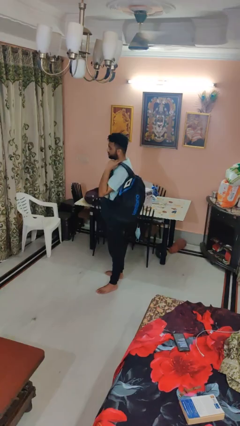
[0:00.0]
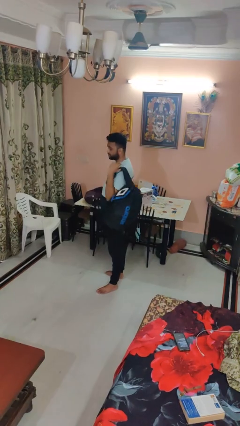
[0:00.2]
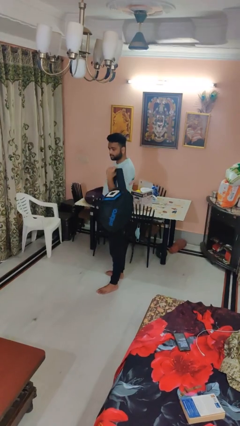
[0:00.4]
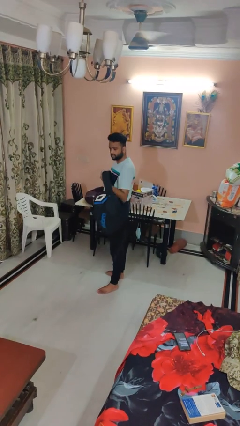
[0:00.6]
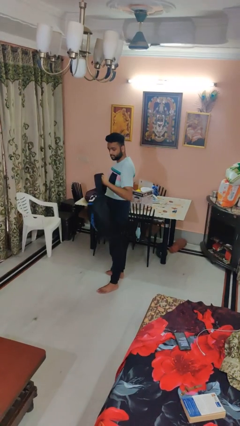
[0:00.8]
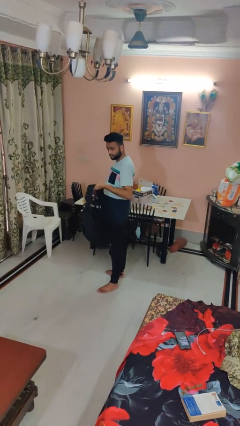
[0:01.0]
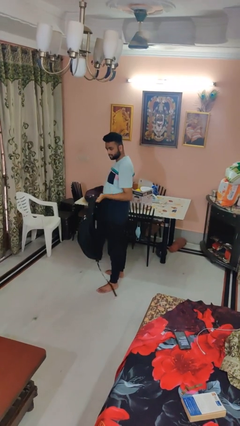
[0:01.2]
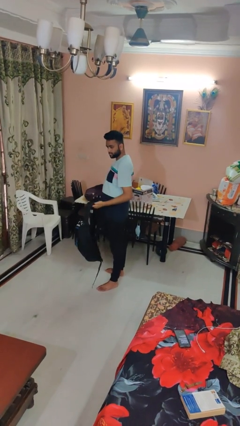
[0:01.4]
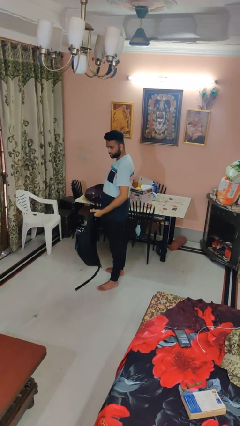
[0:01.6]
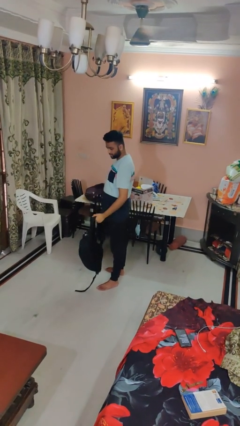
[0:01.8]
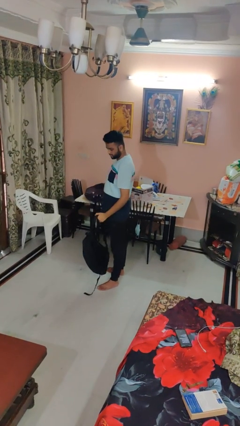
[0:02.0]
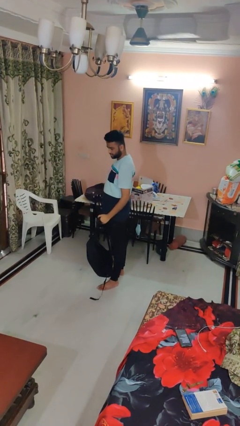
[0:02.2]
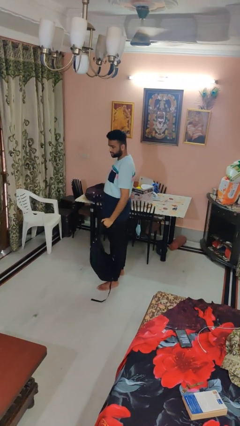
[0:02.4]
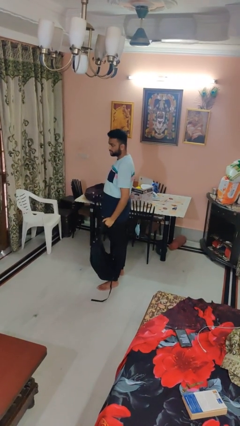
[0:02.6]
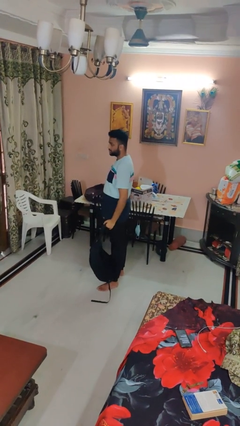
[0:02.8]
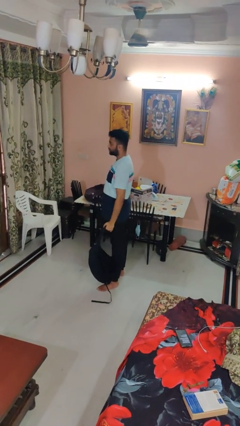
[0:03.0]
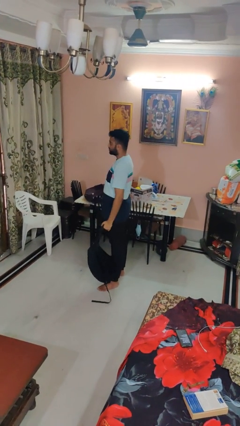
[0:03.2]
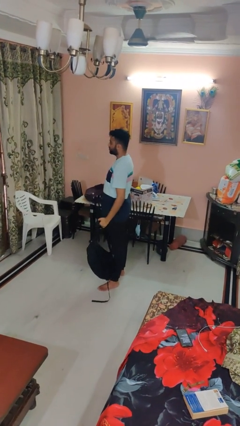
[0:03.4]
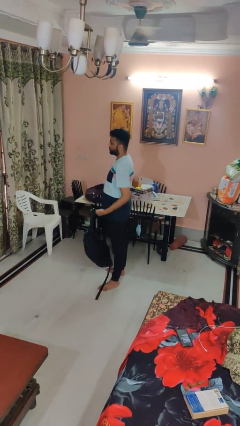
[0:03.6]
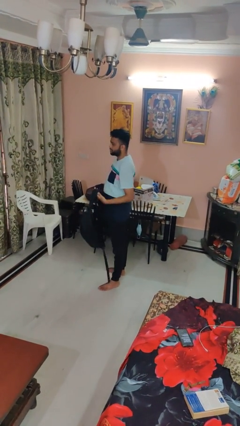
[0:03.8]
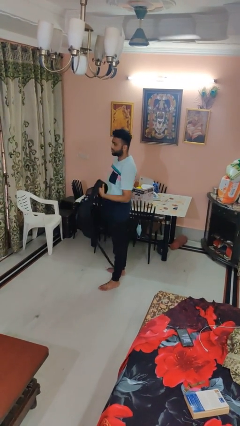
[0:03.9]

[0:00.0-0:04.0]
person takes off backpack

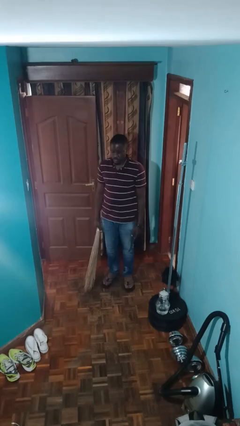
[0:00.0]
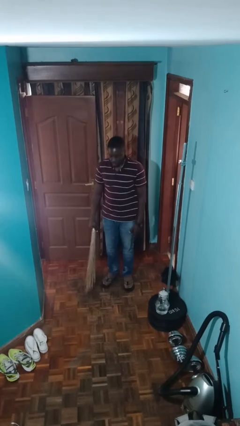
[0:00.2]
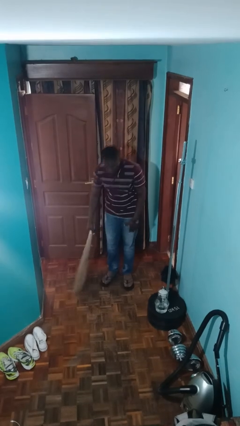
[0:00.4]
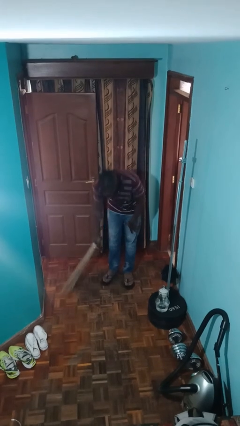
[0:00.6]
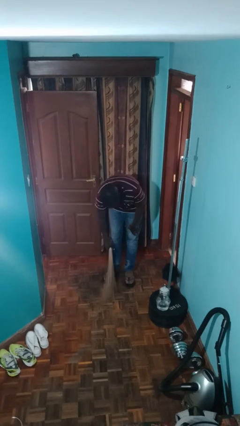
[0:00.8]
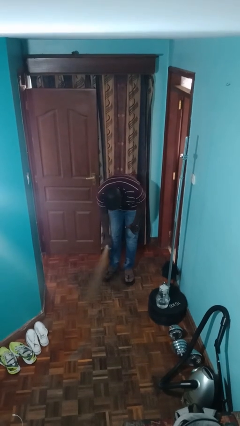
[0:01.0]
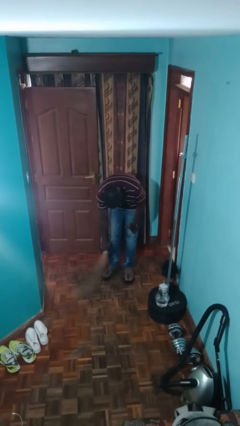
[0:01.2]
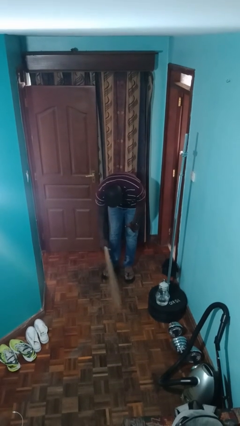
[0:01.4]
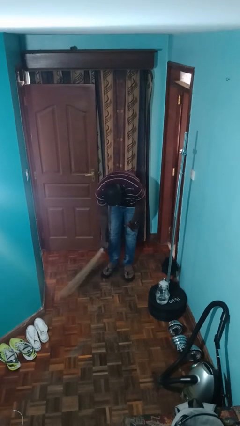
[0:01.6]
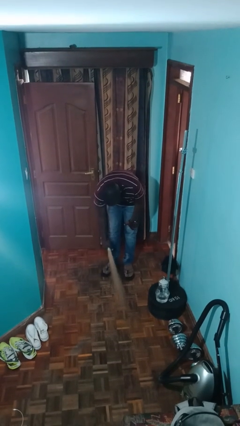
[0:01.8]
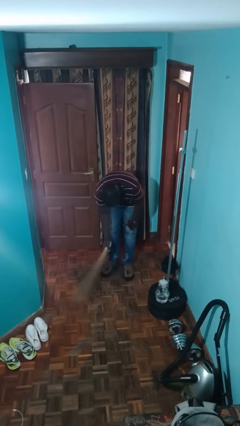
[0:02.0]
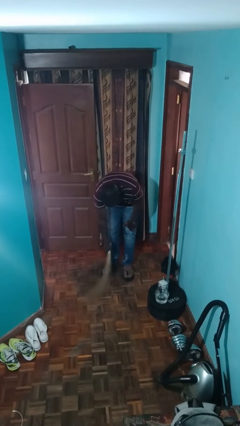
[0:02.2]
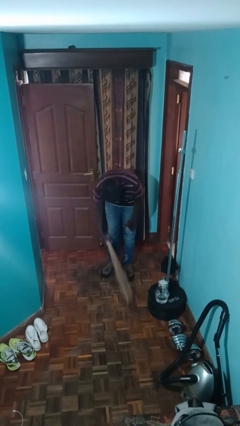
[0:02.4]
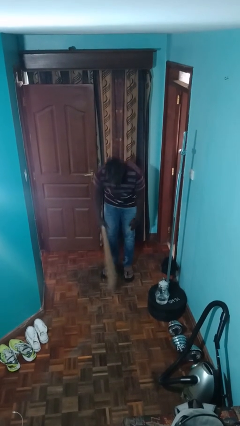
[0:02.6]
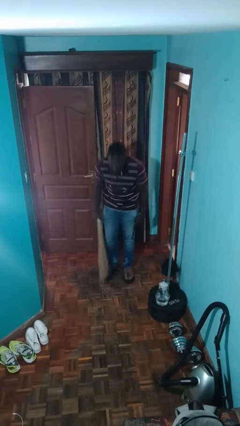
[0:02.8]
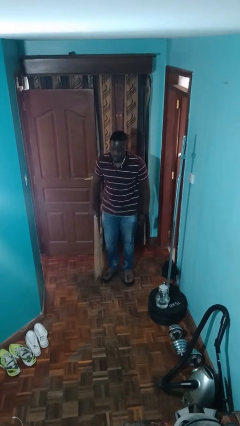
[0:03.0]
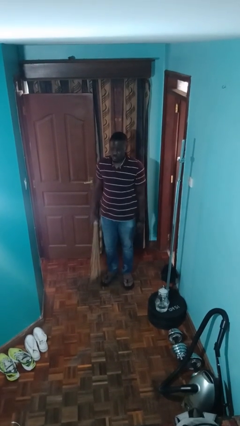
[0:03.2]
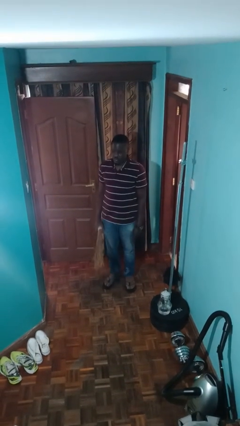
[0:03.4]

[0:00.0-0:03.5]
person sweeps floor

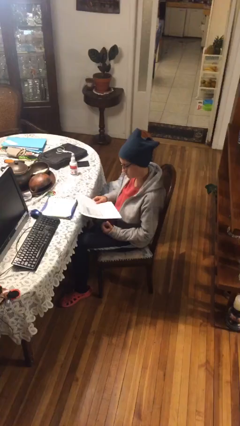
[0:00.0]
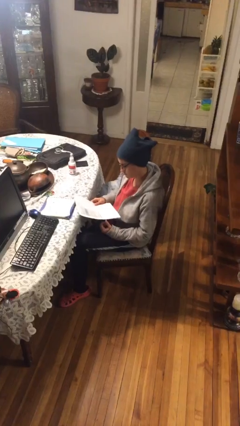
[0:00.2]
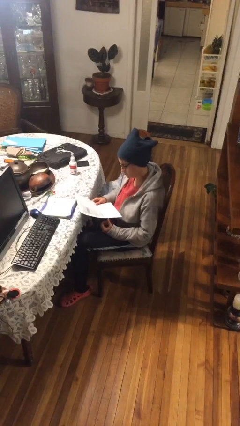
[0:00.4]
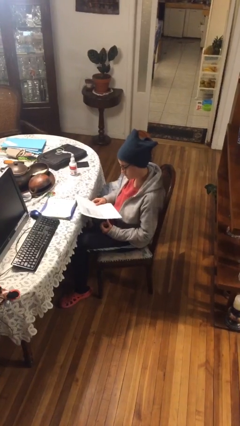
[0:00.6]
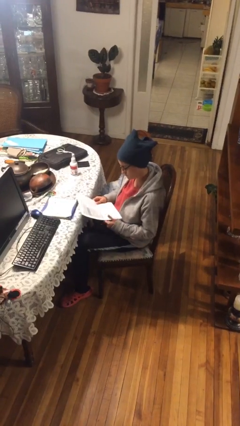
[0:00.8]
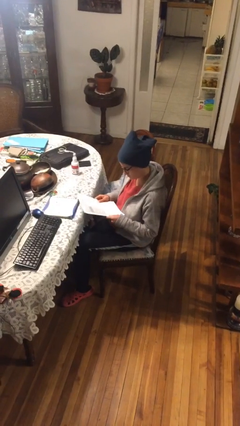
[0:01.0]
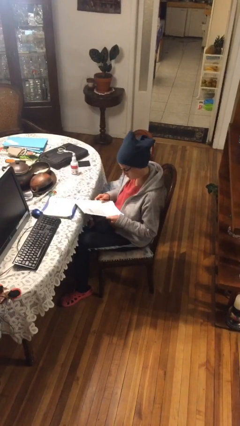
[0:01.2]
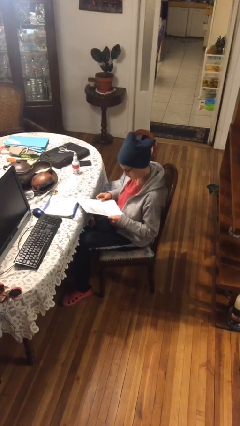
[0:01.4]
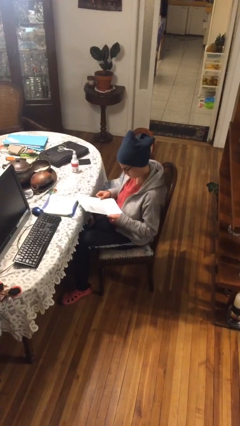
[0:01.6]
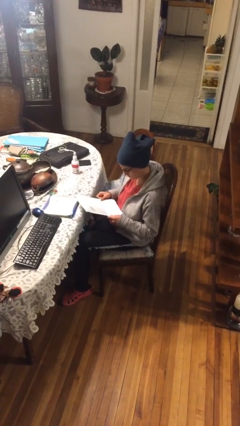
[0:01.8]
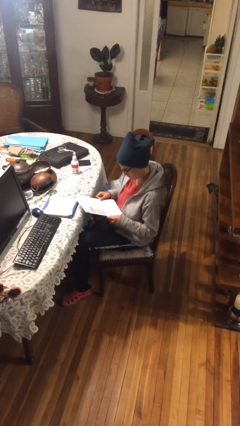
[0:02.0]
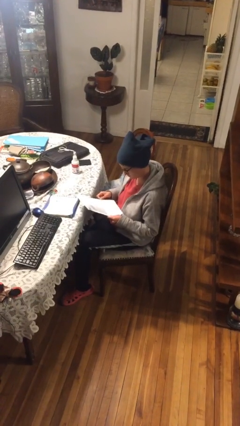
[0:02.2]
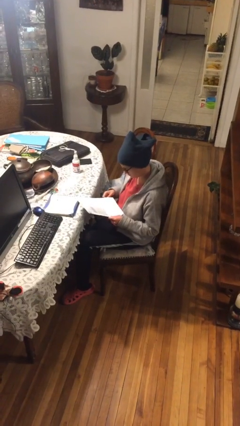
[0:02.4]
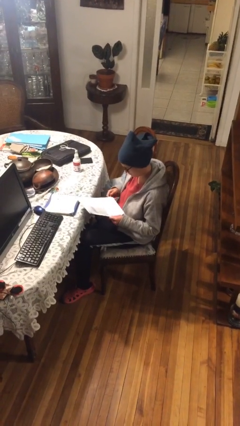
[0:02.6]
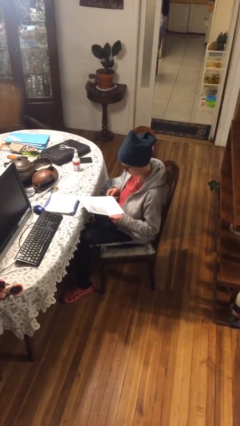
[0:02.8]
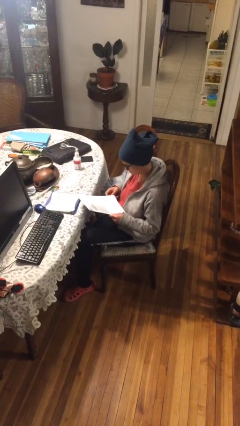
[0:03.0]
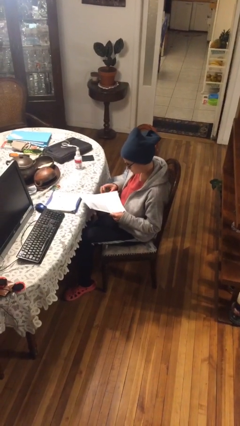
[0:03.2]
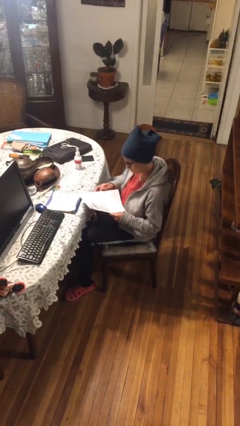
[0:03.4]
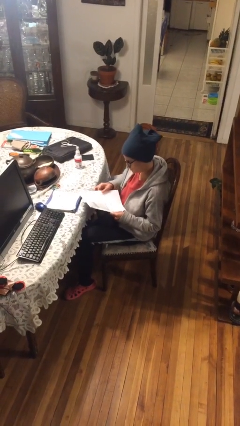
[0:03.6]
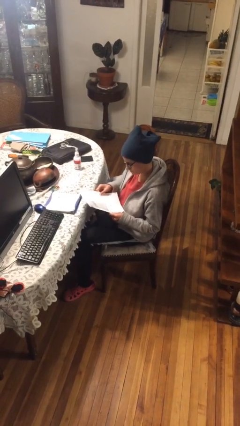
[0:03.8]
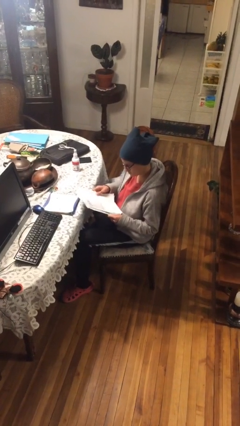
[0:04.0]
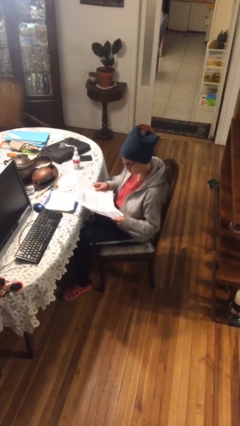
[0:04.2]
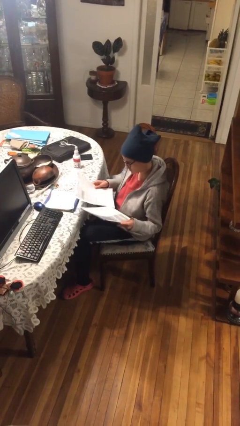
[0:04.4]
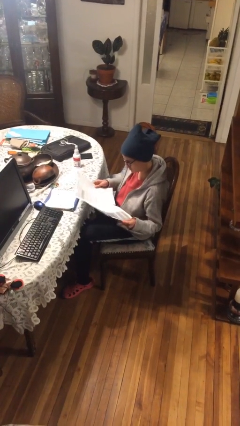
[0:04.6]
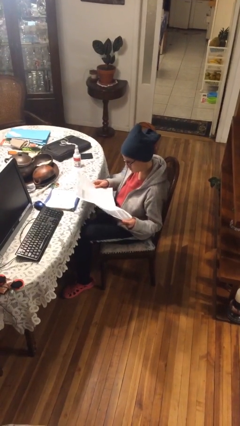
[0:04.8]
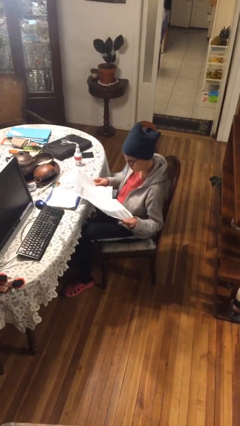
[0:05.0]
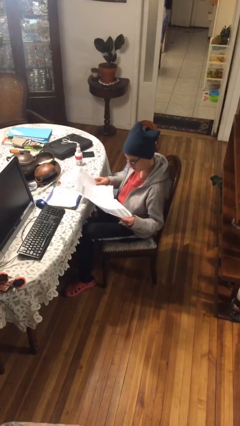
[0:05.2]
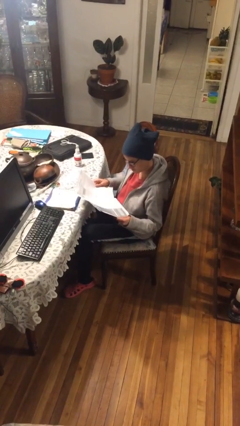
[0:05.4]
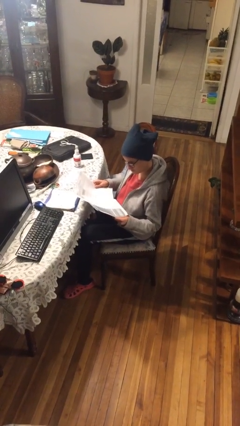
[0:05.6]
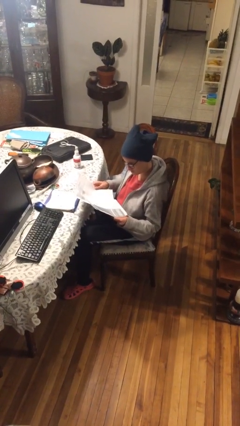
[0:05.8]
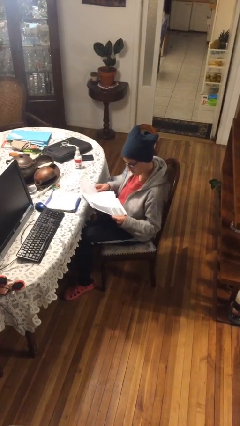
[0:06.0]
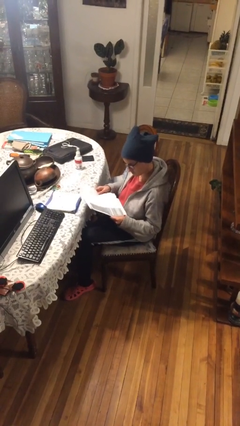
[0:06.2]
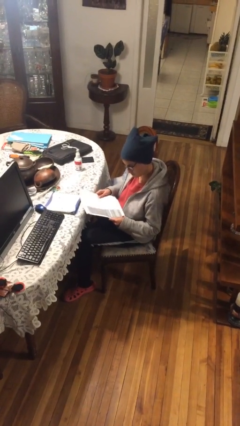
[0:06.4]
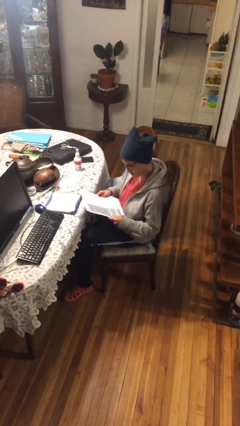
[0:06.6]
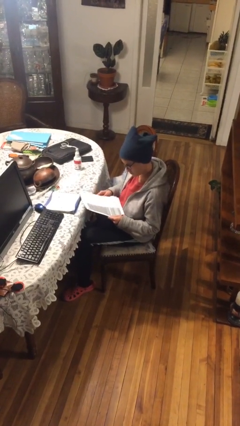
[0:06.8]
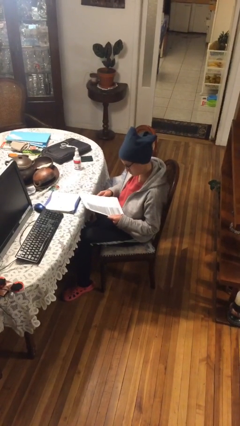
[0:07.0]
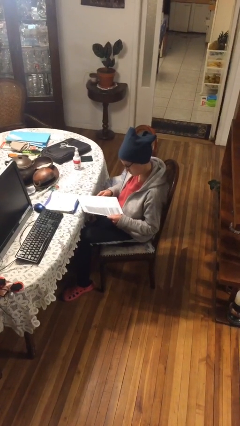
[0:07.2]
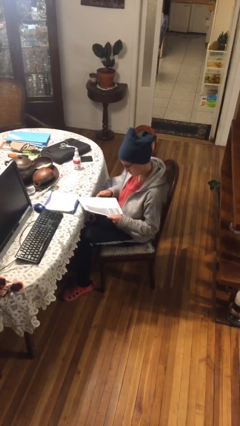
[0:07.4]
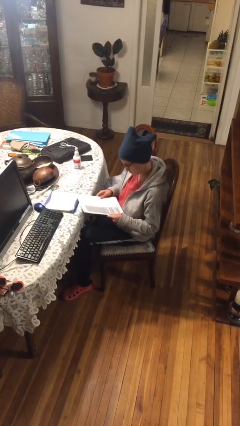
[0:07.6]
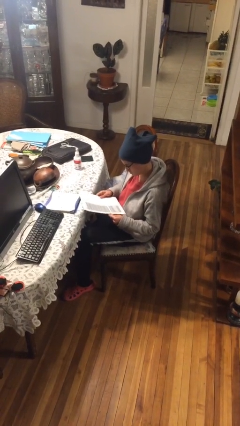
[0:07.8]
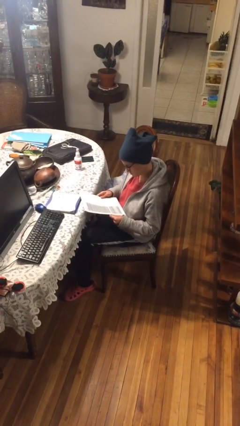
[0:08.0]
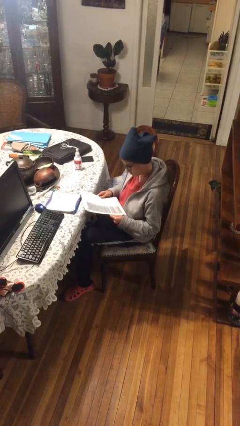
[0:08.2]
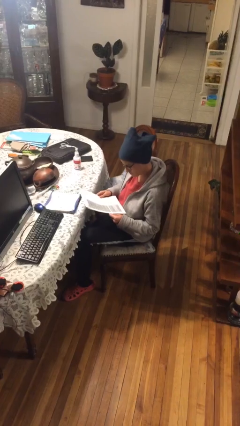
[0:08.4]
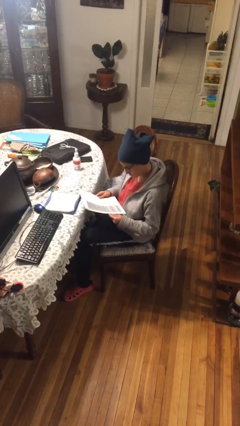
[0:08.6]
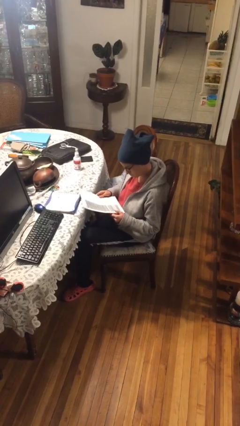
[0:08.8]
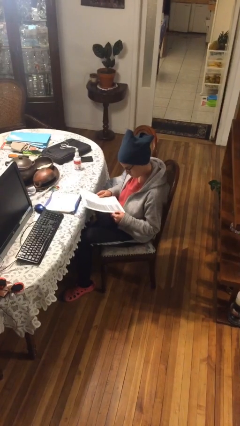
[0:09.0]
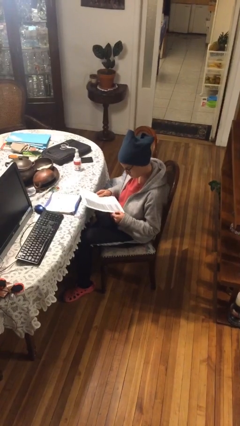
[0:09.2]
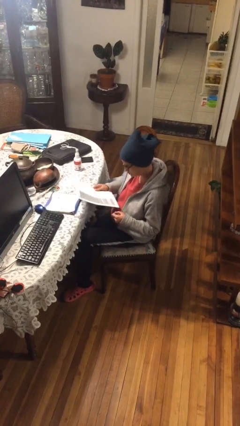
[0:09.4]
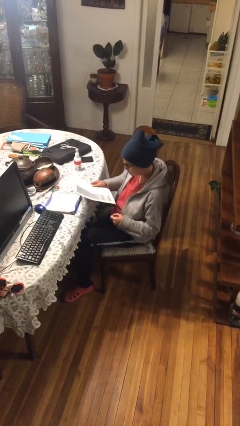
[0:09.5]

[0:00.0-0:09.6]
person reads document

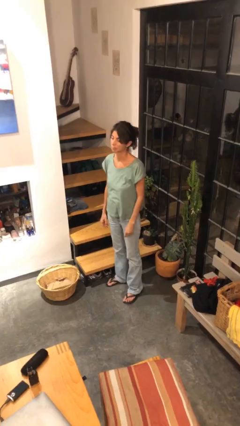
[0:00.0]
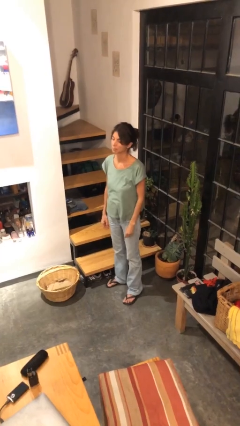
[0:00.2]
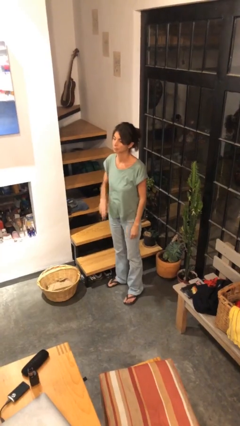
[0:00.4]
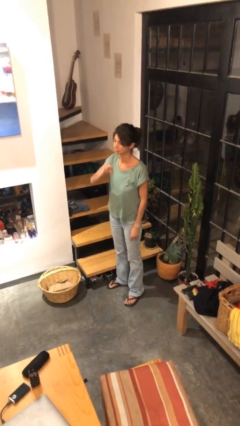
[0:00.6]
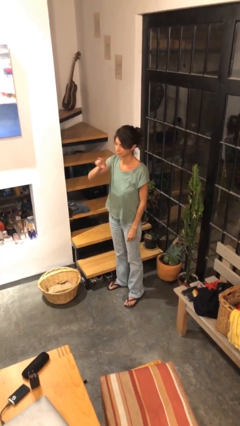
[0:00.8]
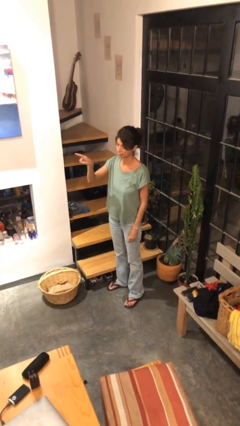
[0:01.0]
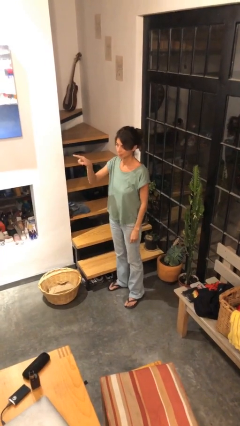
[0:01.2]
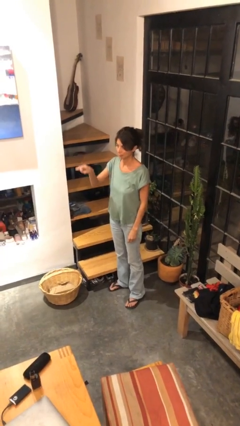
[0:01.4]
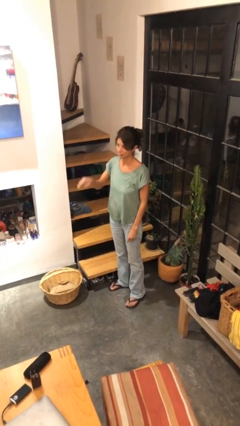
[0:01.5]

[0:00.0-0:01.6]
person gestures swipe right
